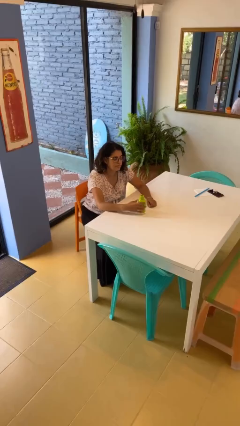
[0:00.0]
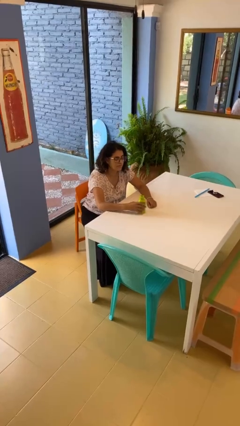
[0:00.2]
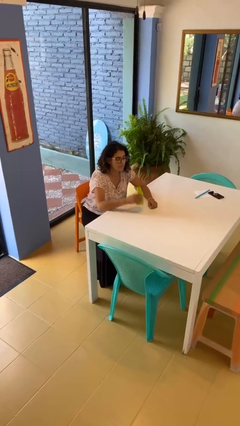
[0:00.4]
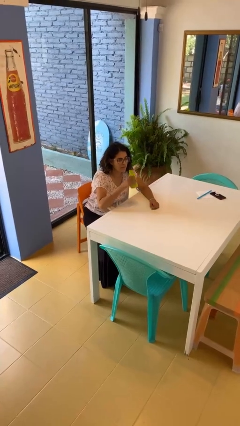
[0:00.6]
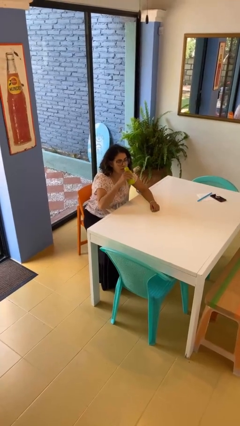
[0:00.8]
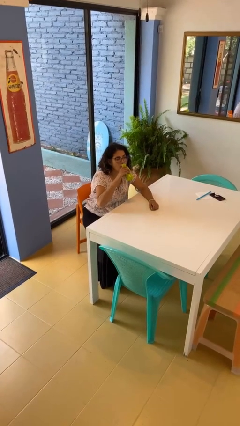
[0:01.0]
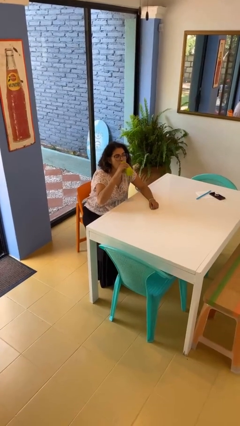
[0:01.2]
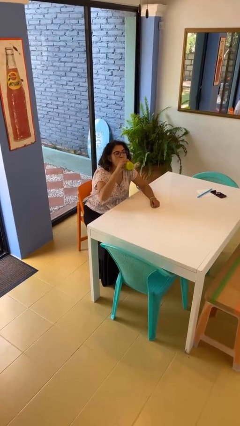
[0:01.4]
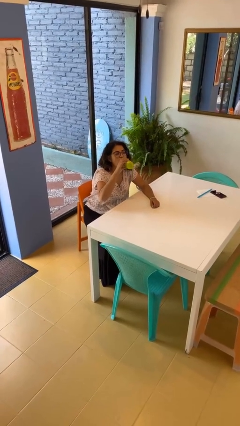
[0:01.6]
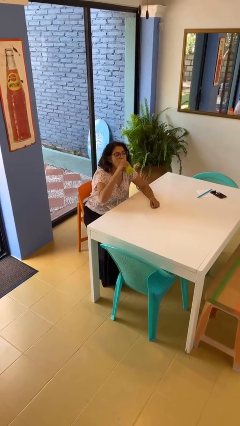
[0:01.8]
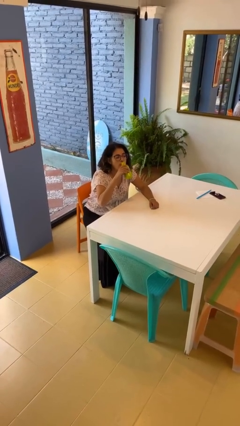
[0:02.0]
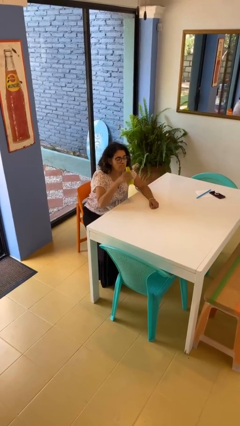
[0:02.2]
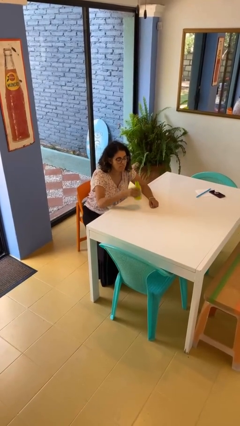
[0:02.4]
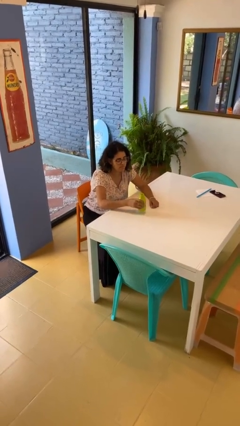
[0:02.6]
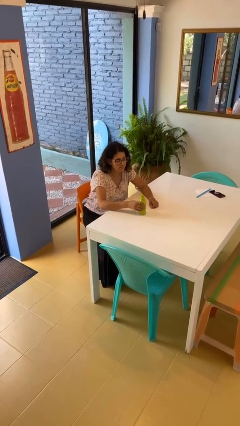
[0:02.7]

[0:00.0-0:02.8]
person drinks from bottle

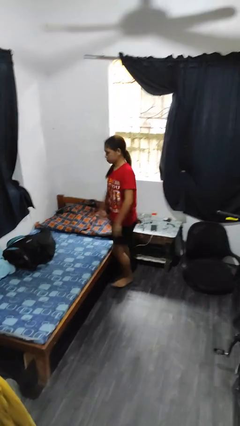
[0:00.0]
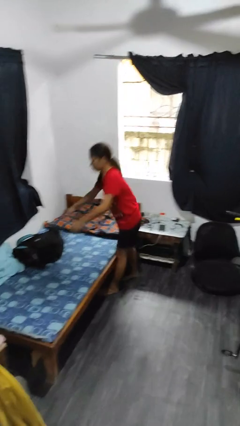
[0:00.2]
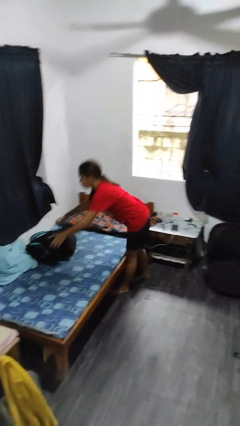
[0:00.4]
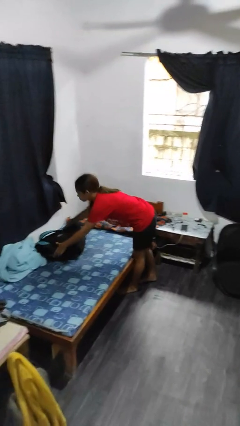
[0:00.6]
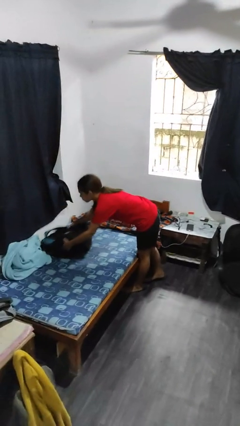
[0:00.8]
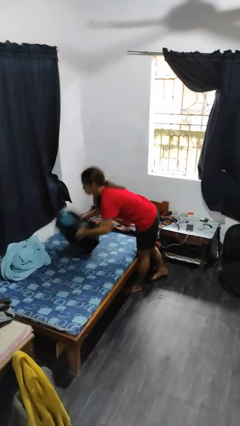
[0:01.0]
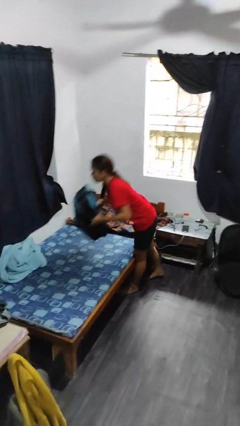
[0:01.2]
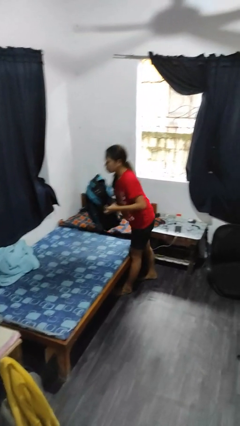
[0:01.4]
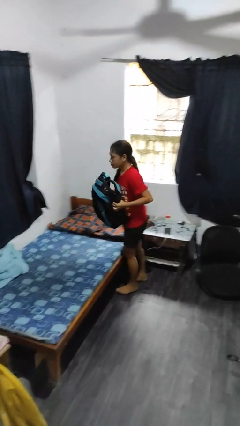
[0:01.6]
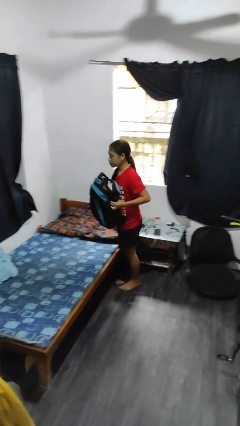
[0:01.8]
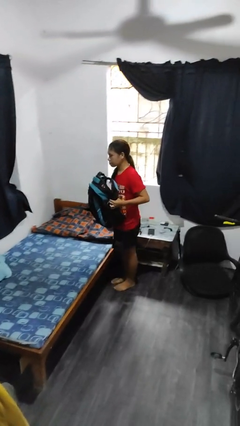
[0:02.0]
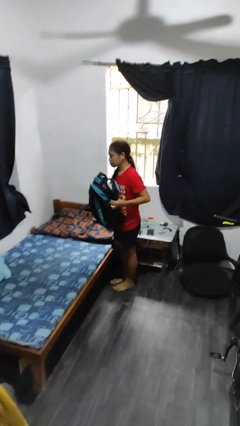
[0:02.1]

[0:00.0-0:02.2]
person picks up object from bed

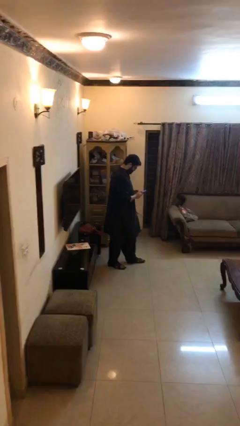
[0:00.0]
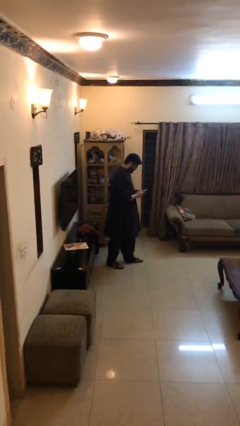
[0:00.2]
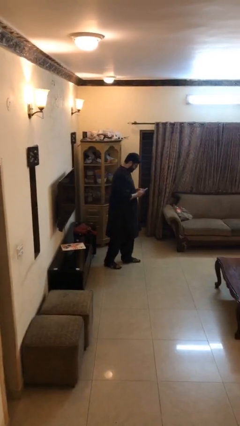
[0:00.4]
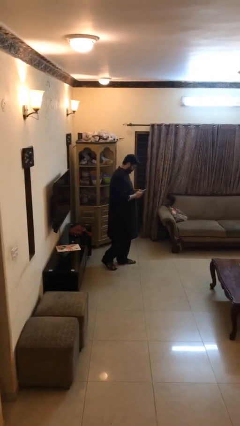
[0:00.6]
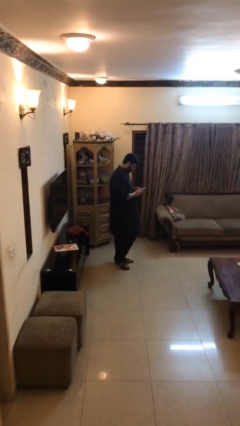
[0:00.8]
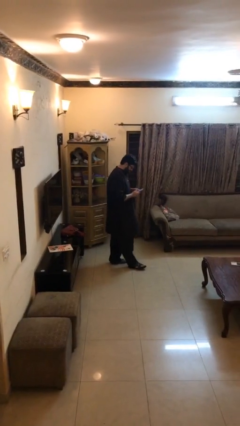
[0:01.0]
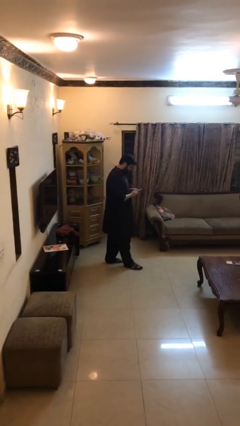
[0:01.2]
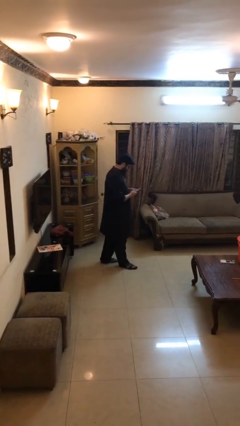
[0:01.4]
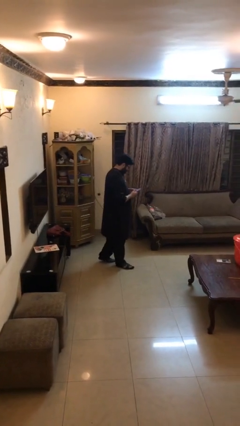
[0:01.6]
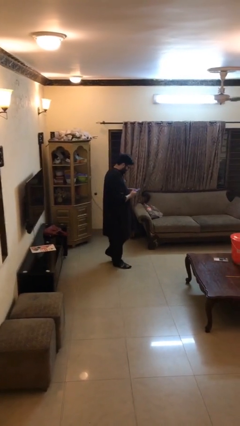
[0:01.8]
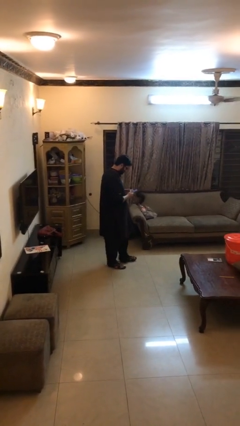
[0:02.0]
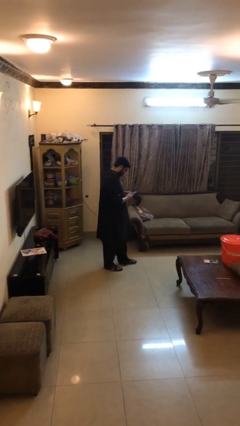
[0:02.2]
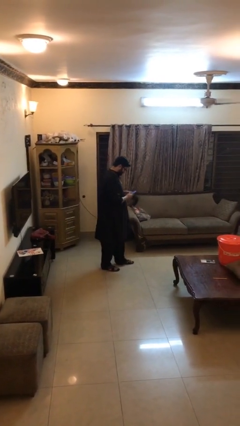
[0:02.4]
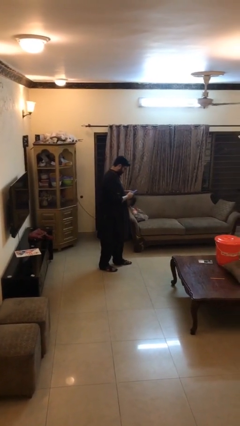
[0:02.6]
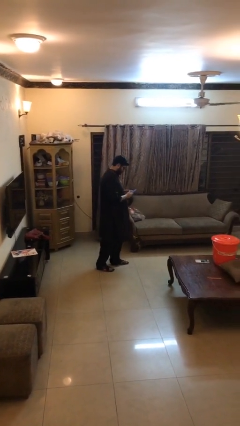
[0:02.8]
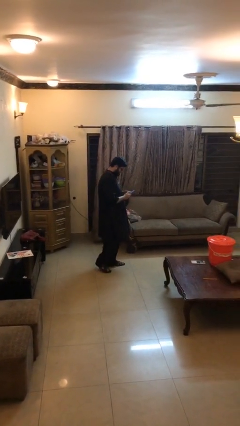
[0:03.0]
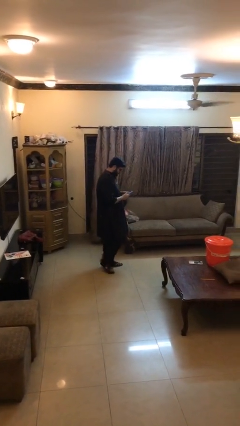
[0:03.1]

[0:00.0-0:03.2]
person texts on phone

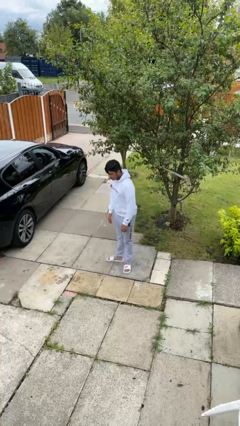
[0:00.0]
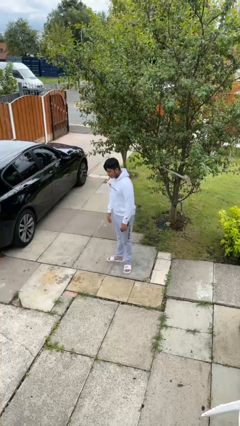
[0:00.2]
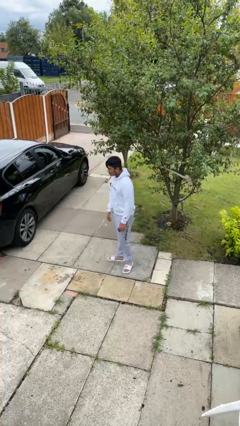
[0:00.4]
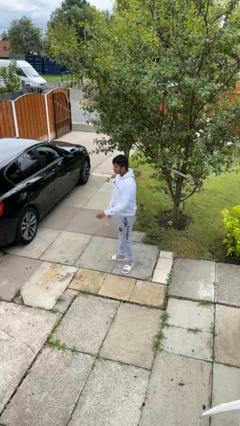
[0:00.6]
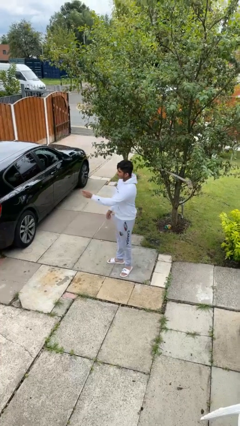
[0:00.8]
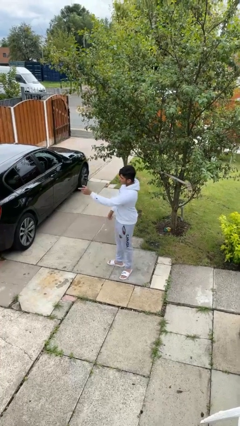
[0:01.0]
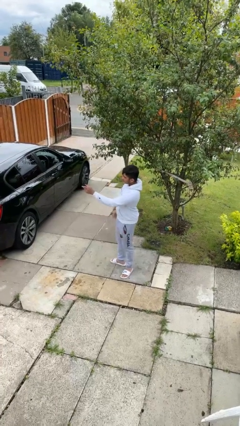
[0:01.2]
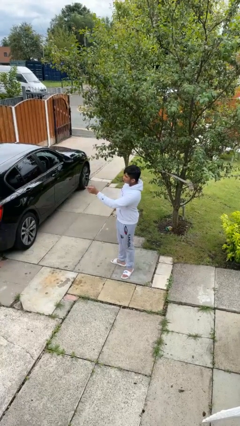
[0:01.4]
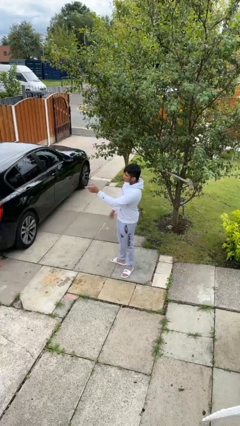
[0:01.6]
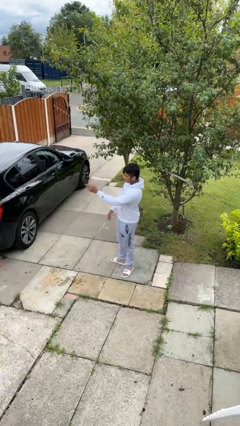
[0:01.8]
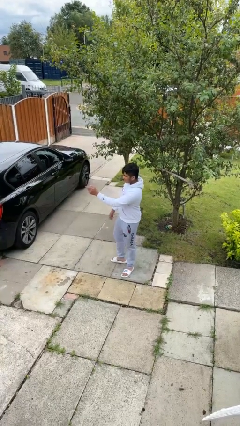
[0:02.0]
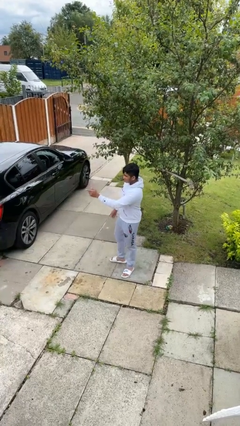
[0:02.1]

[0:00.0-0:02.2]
person points at person

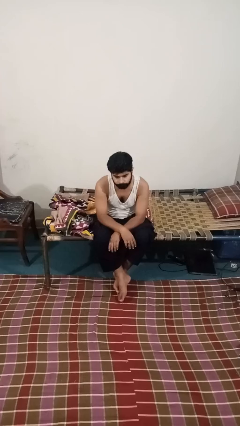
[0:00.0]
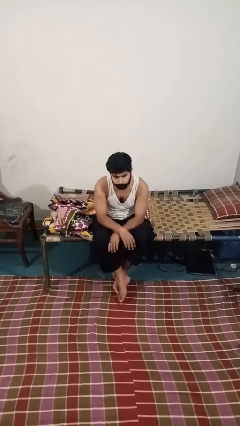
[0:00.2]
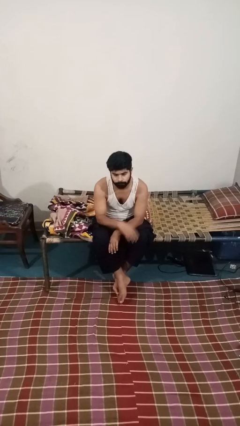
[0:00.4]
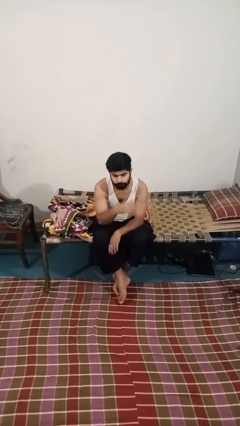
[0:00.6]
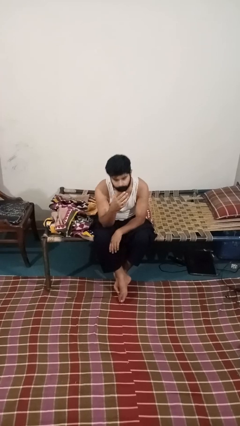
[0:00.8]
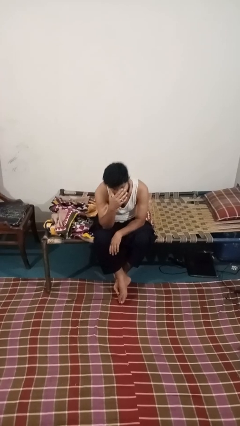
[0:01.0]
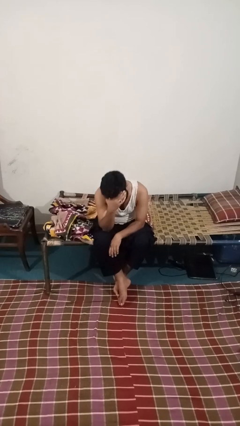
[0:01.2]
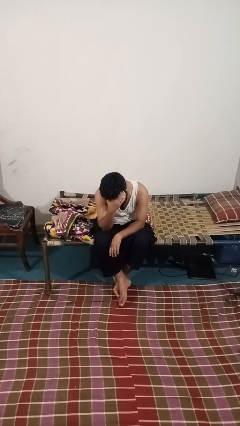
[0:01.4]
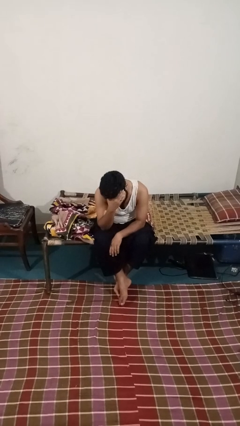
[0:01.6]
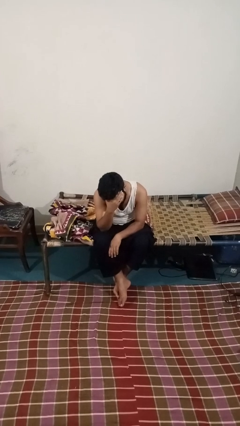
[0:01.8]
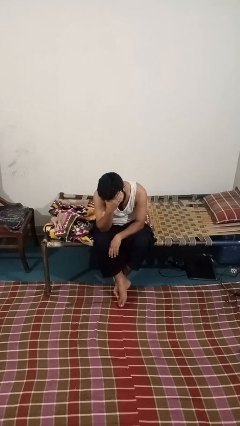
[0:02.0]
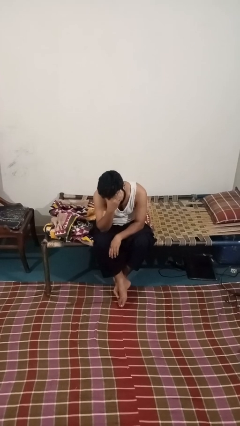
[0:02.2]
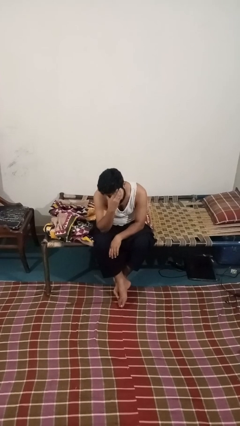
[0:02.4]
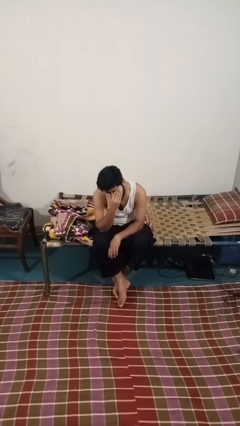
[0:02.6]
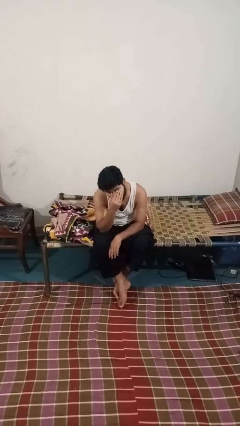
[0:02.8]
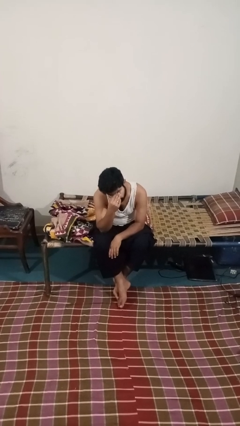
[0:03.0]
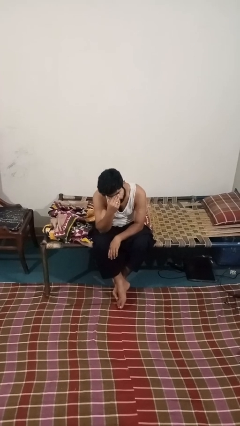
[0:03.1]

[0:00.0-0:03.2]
person covers face with hands

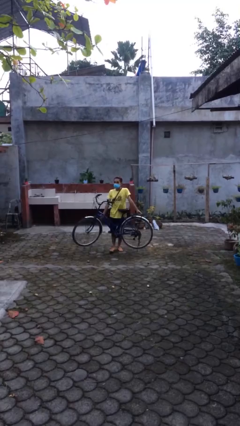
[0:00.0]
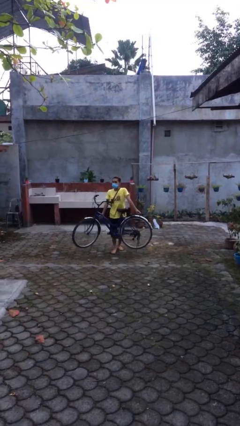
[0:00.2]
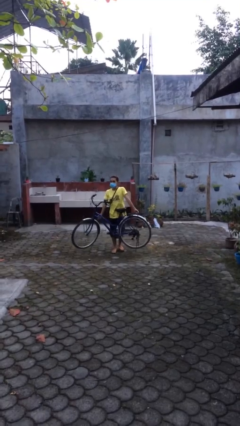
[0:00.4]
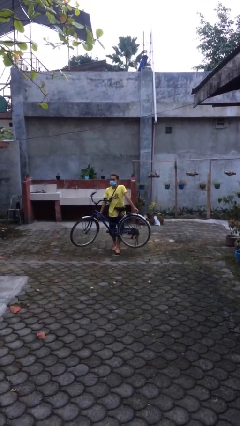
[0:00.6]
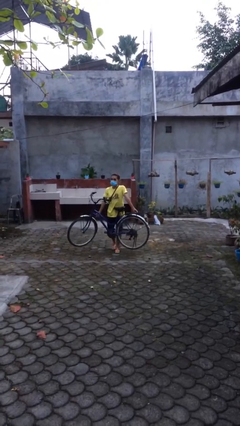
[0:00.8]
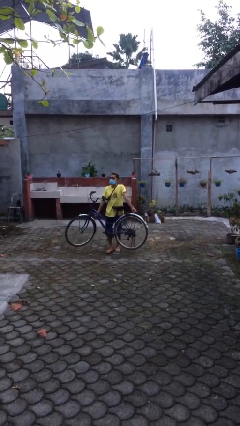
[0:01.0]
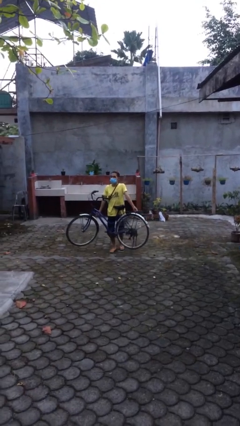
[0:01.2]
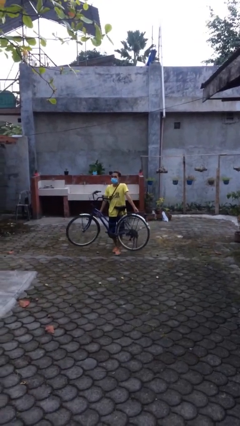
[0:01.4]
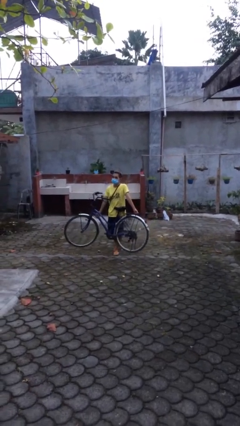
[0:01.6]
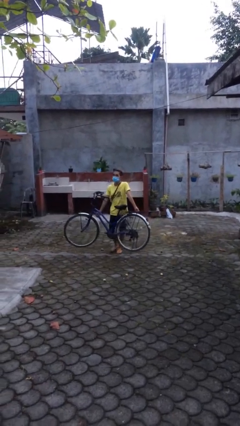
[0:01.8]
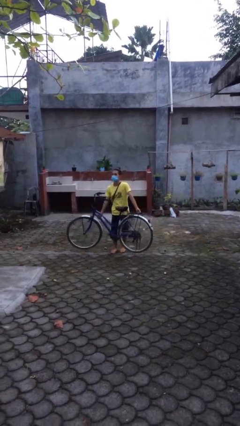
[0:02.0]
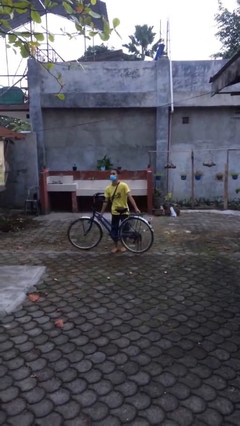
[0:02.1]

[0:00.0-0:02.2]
person carries heavy object

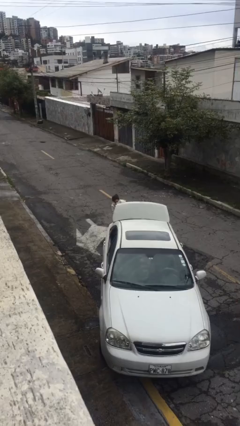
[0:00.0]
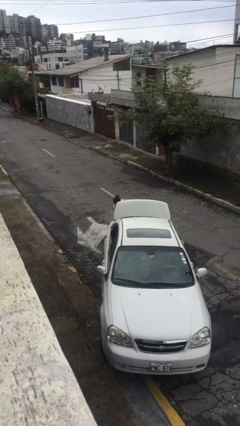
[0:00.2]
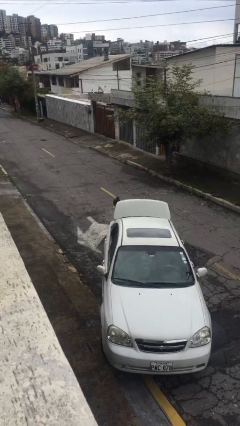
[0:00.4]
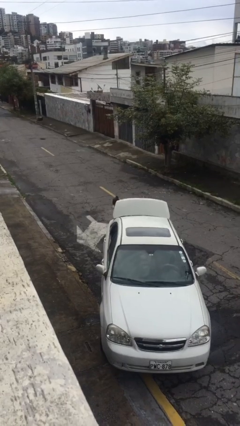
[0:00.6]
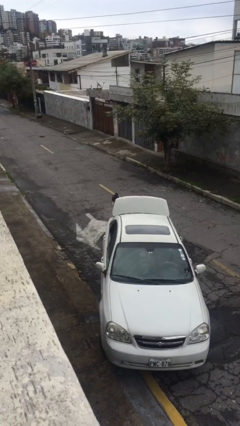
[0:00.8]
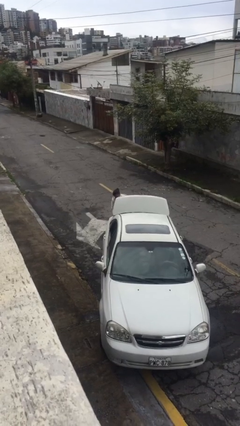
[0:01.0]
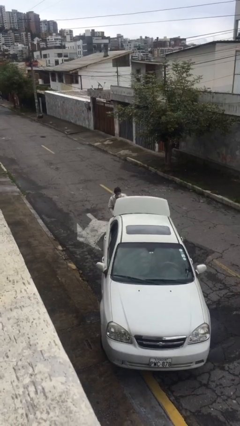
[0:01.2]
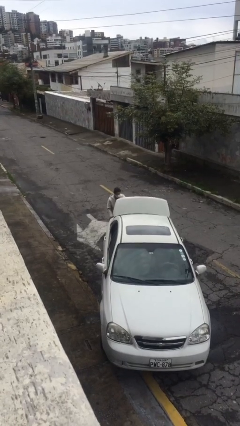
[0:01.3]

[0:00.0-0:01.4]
person loads car
